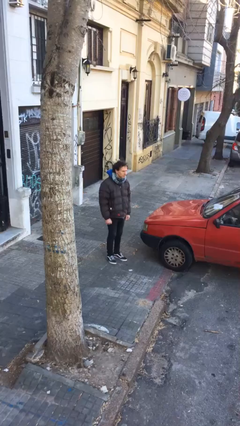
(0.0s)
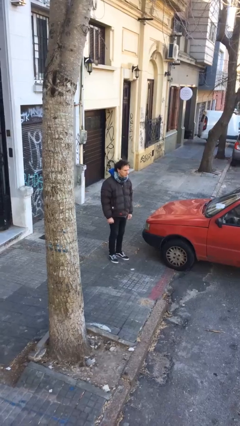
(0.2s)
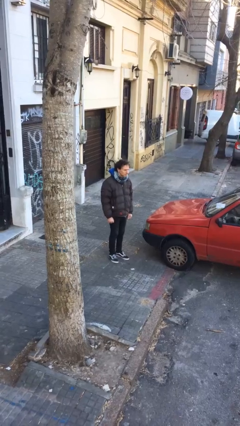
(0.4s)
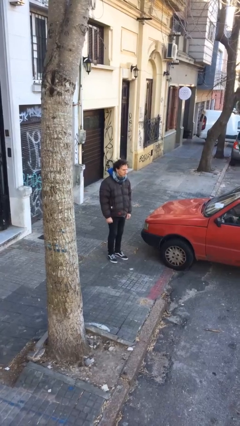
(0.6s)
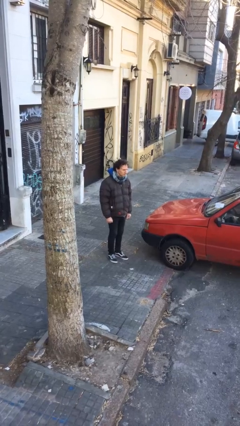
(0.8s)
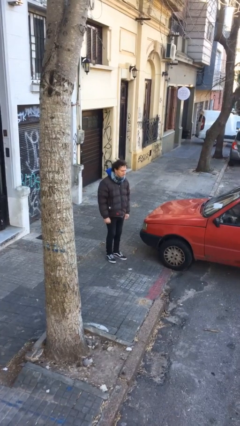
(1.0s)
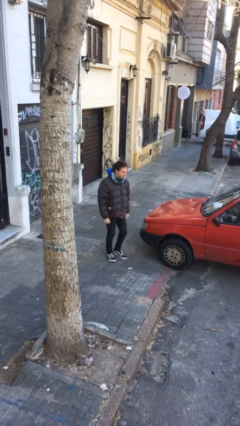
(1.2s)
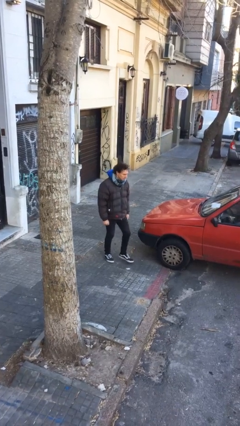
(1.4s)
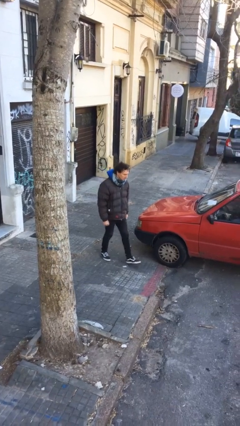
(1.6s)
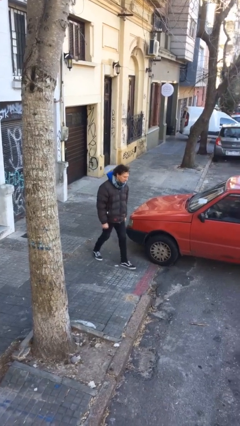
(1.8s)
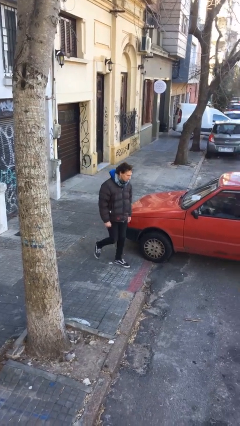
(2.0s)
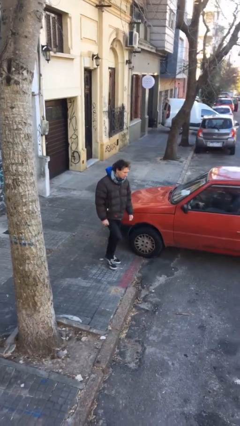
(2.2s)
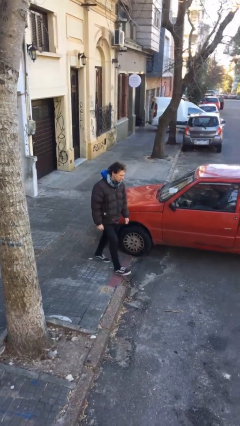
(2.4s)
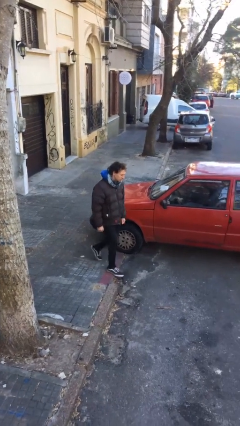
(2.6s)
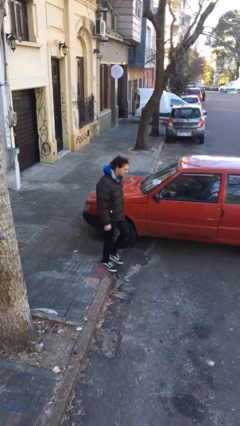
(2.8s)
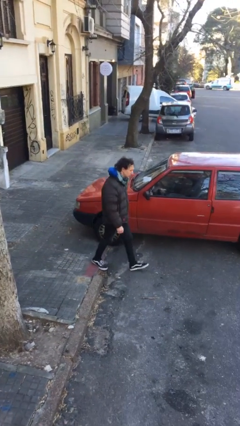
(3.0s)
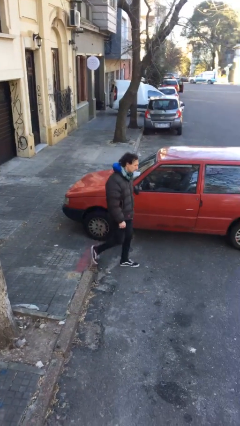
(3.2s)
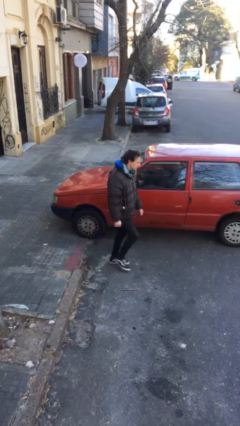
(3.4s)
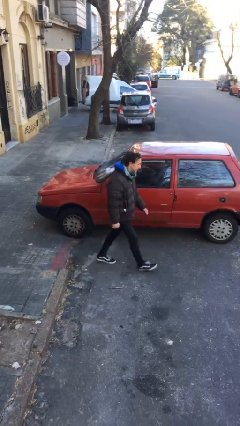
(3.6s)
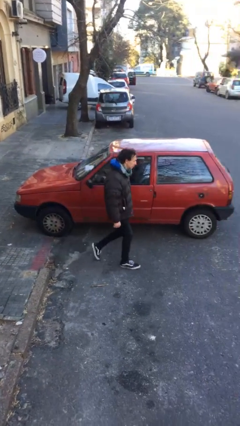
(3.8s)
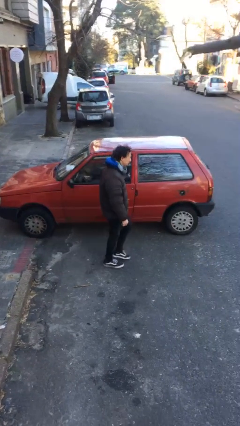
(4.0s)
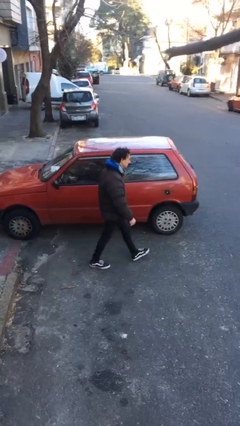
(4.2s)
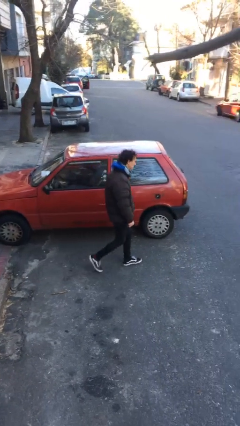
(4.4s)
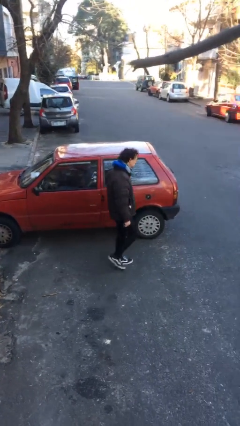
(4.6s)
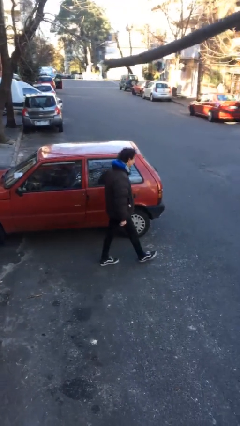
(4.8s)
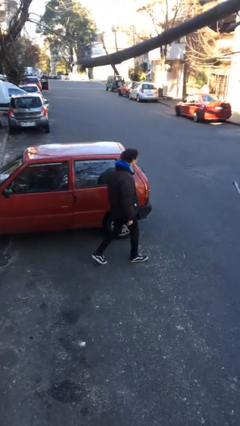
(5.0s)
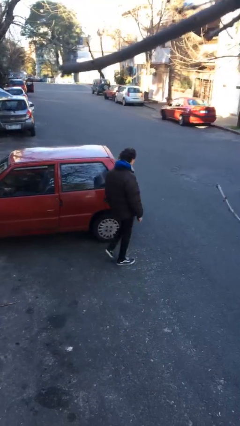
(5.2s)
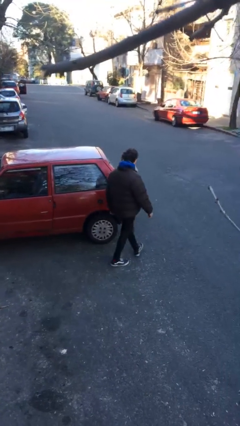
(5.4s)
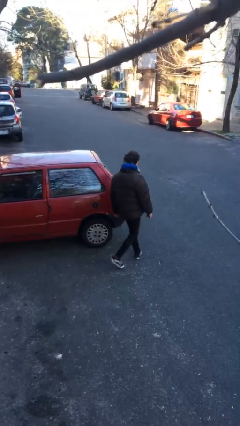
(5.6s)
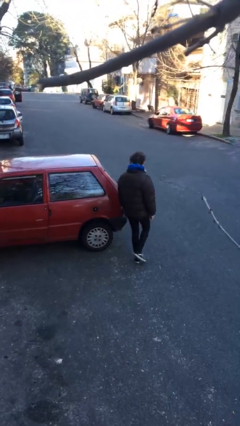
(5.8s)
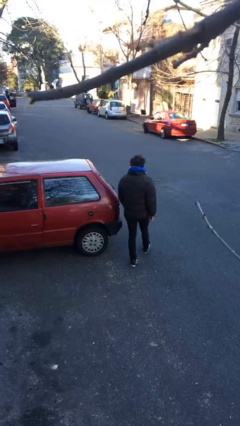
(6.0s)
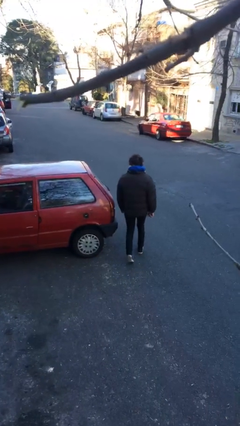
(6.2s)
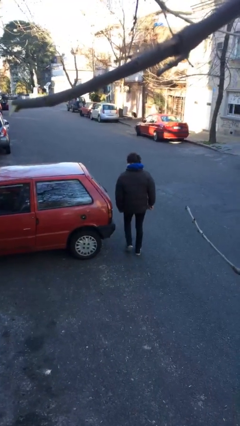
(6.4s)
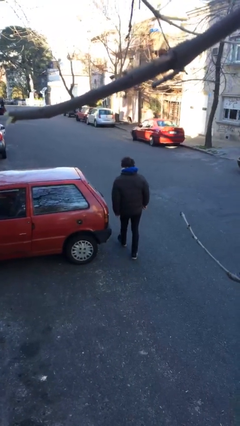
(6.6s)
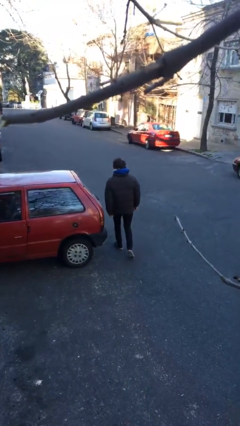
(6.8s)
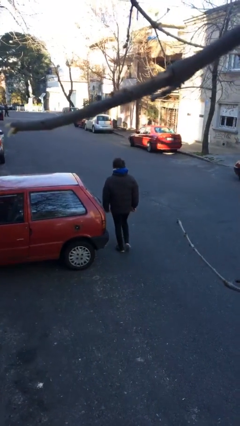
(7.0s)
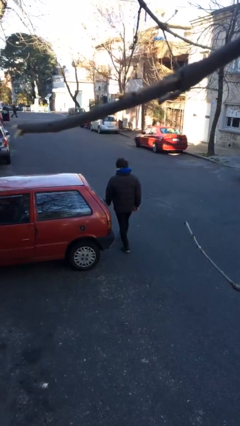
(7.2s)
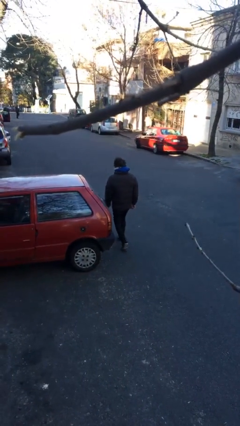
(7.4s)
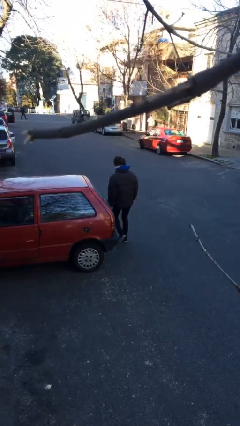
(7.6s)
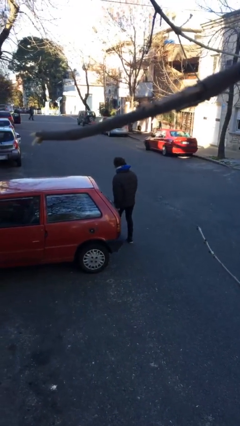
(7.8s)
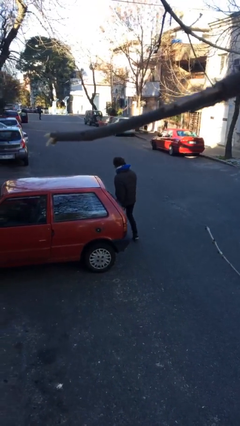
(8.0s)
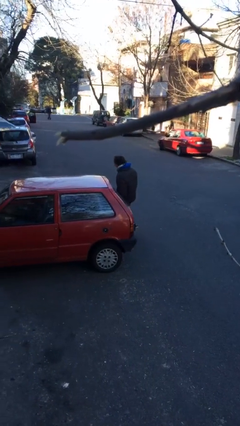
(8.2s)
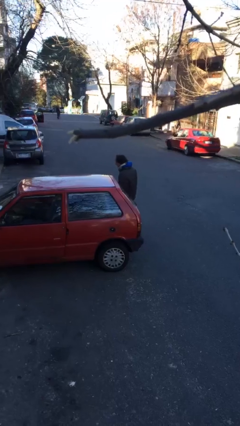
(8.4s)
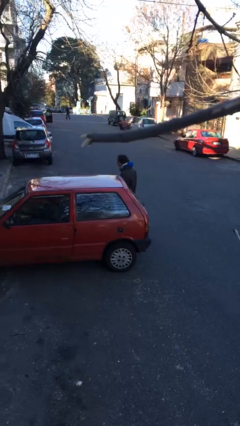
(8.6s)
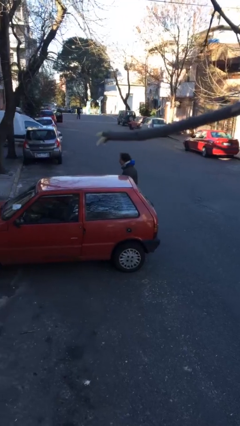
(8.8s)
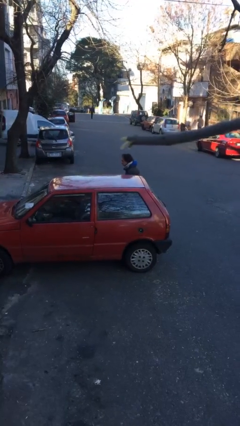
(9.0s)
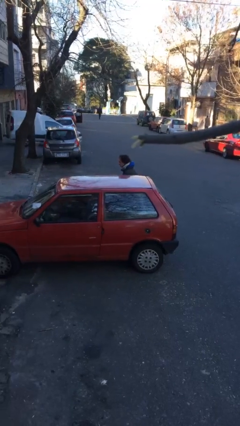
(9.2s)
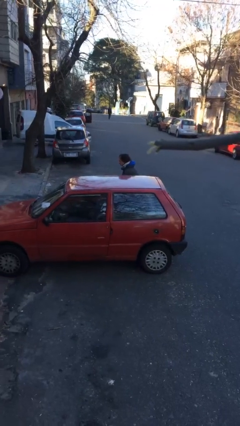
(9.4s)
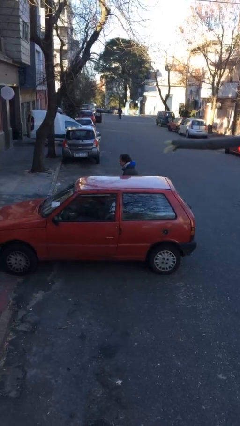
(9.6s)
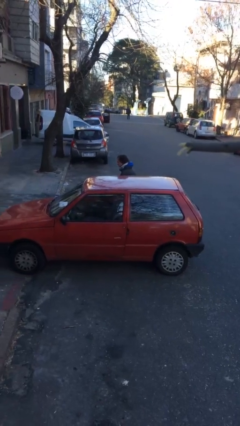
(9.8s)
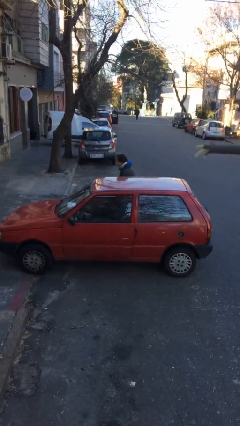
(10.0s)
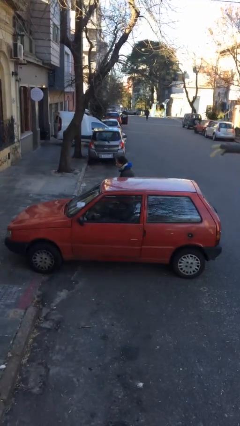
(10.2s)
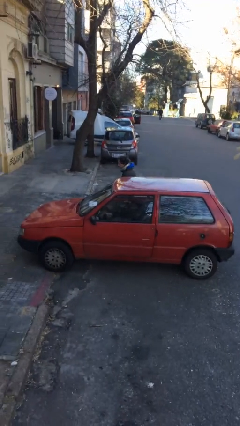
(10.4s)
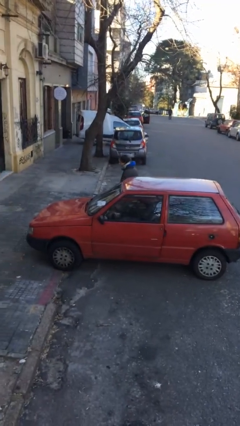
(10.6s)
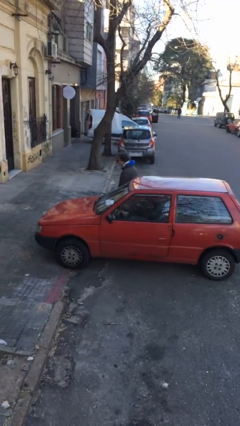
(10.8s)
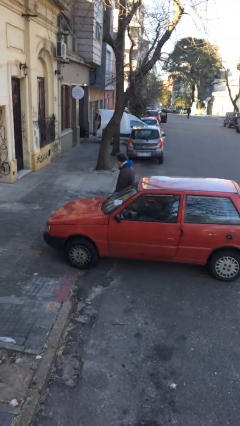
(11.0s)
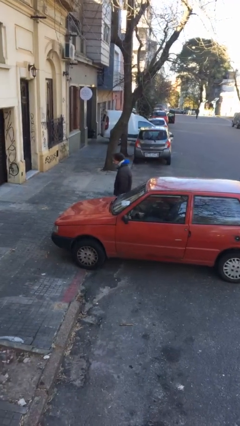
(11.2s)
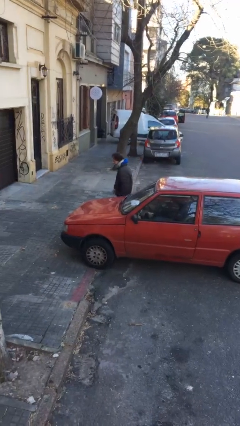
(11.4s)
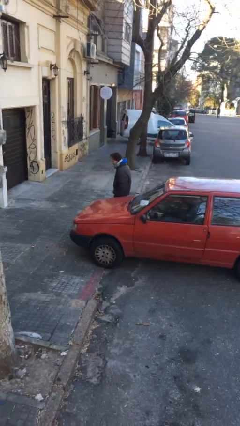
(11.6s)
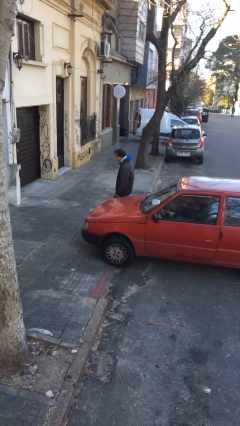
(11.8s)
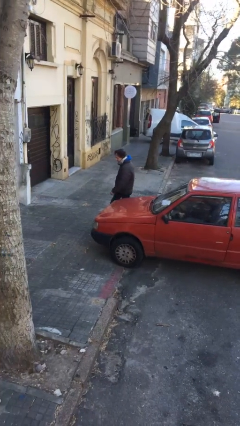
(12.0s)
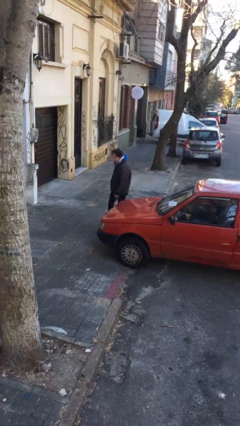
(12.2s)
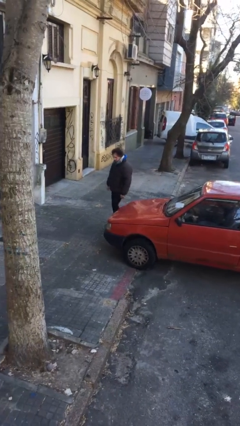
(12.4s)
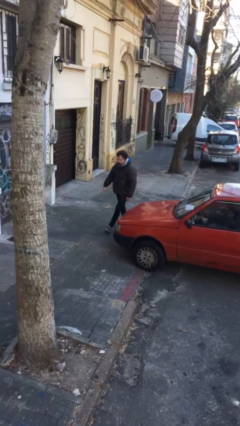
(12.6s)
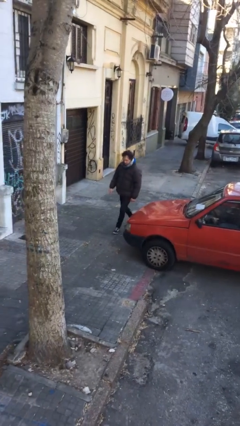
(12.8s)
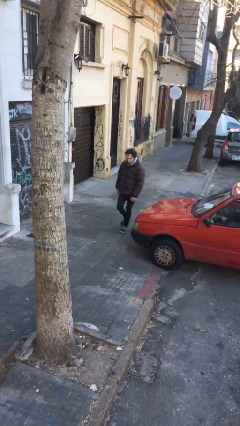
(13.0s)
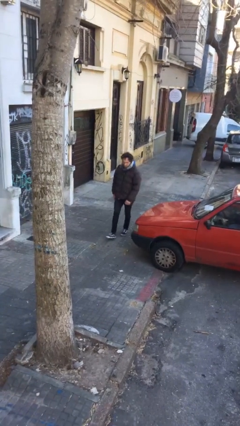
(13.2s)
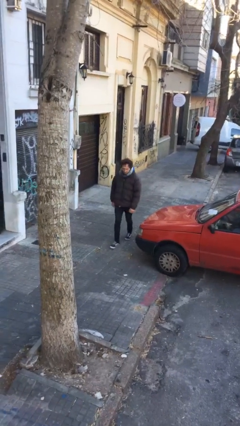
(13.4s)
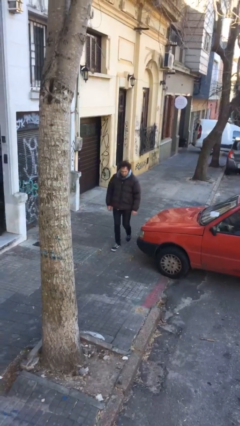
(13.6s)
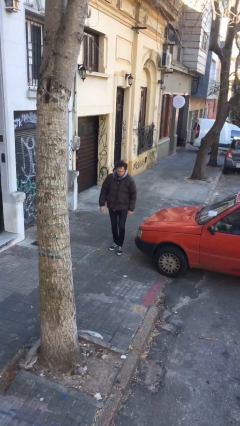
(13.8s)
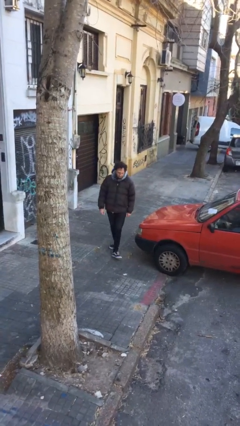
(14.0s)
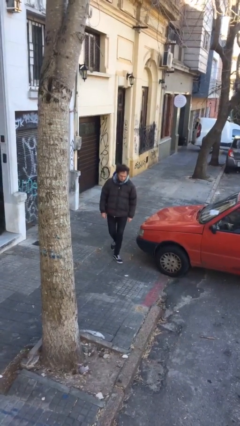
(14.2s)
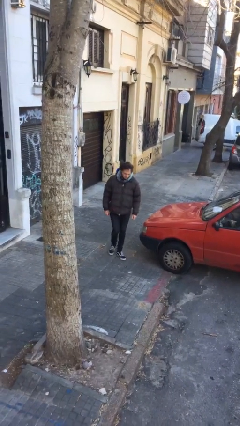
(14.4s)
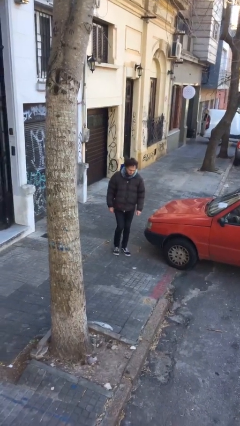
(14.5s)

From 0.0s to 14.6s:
person walks around car

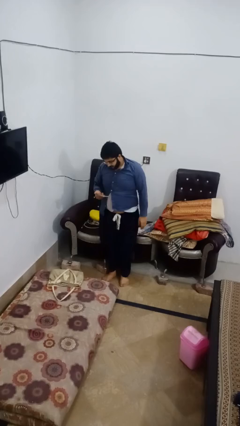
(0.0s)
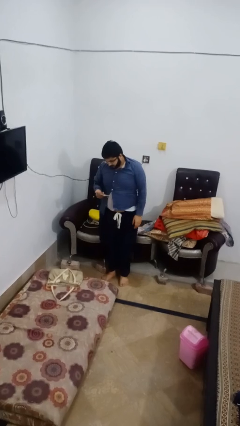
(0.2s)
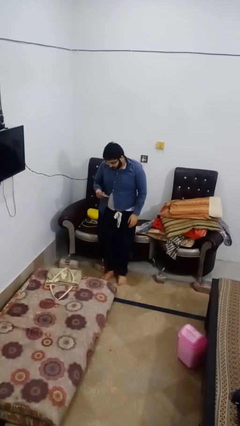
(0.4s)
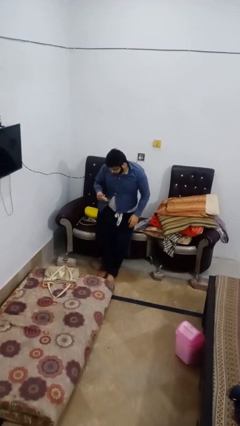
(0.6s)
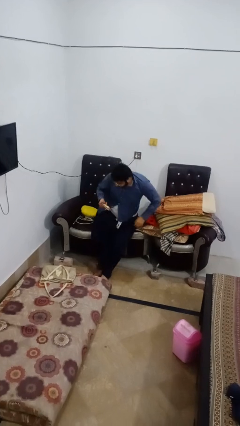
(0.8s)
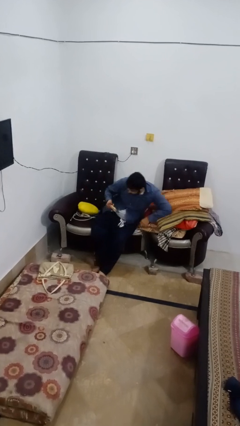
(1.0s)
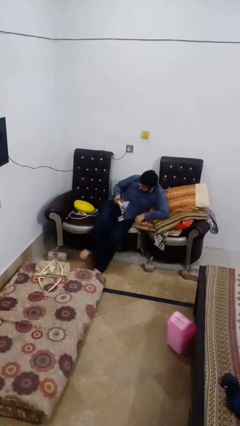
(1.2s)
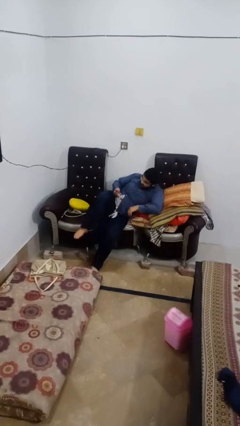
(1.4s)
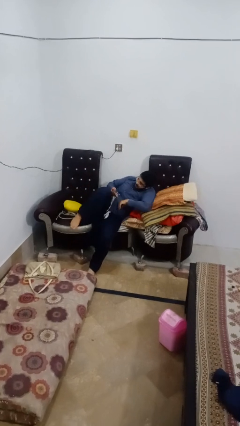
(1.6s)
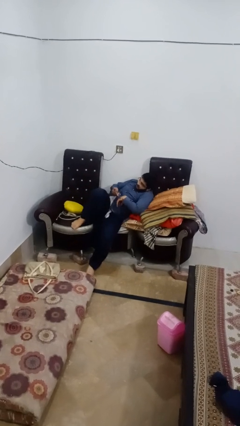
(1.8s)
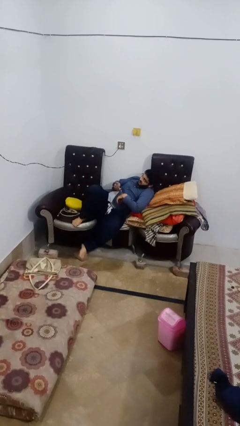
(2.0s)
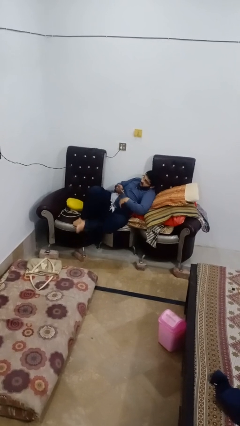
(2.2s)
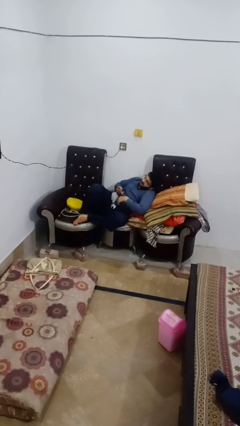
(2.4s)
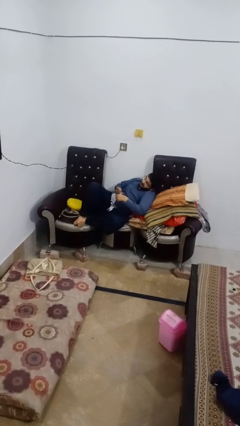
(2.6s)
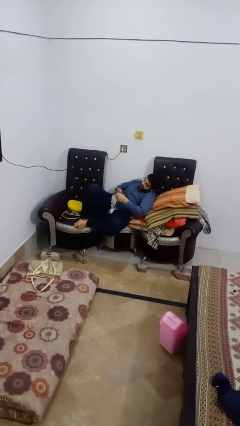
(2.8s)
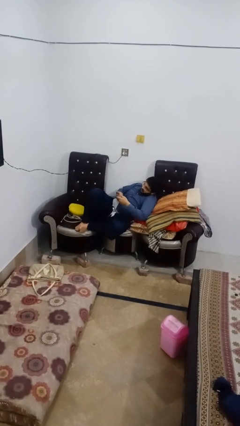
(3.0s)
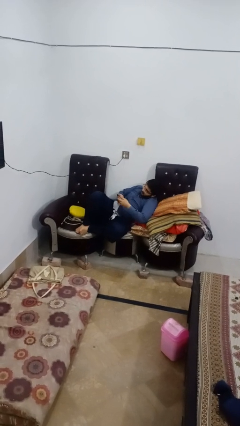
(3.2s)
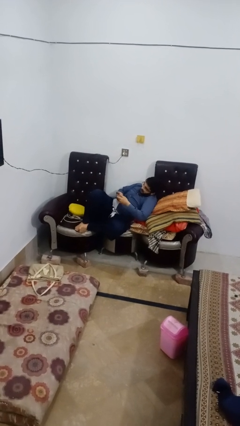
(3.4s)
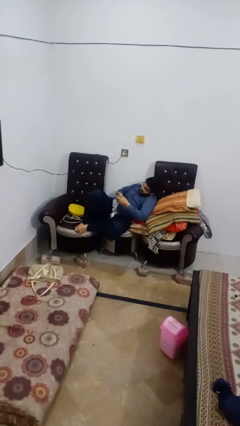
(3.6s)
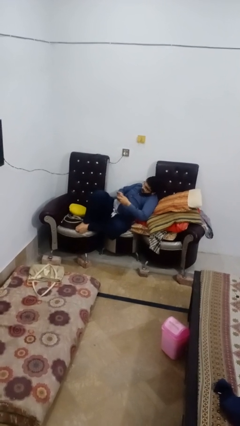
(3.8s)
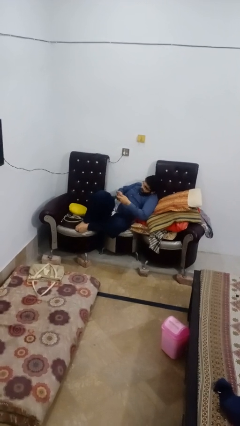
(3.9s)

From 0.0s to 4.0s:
person lies down on couch
